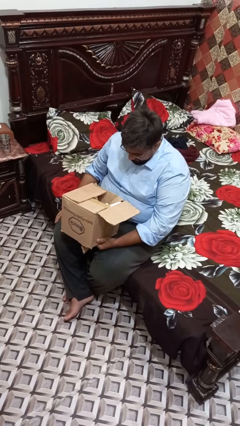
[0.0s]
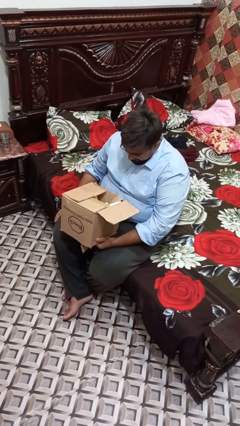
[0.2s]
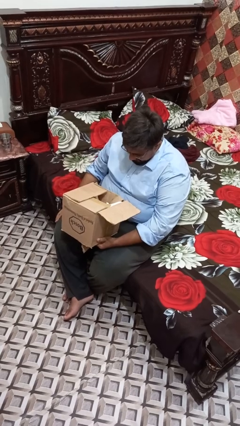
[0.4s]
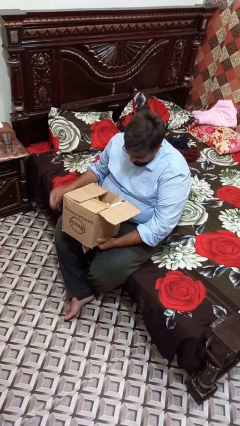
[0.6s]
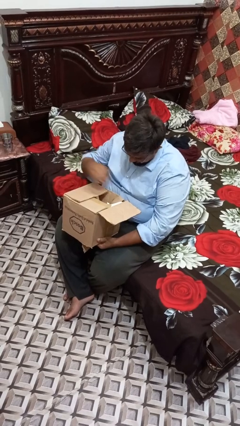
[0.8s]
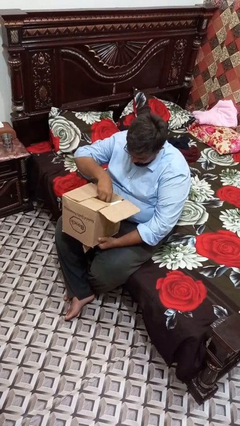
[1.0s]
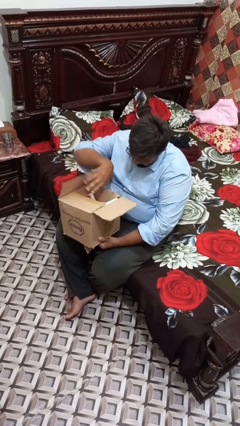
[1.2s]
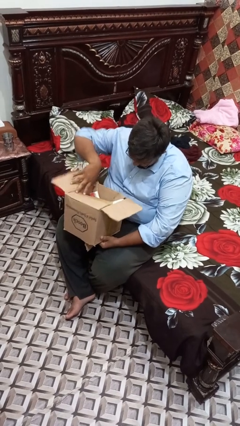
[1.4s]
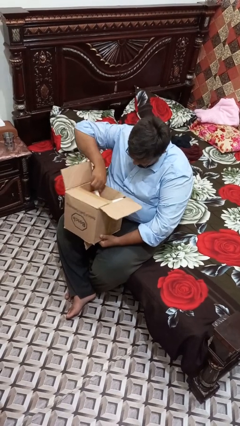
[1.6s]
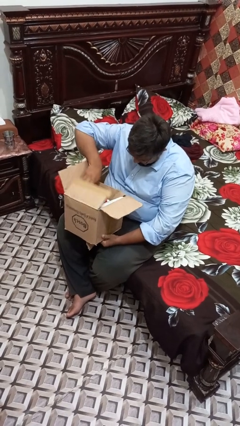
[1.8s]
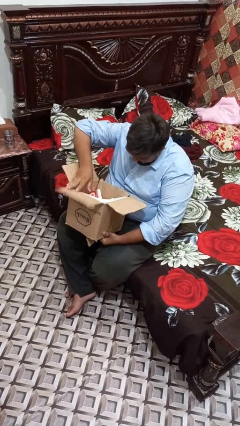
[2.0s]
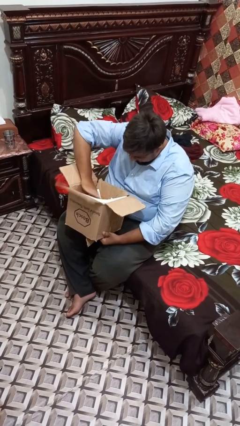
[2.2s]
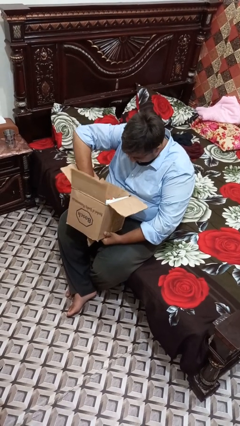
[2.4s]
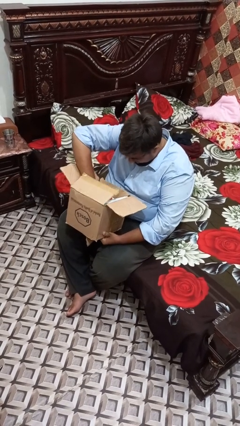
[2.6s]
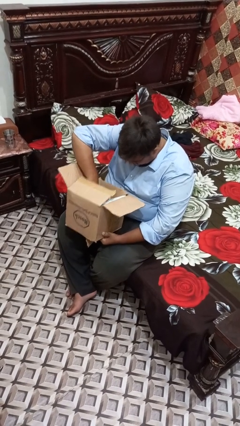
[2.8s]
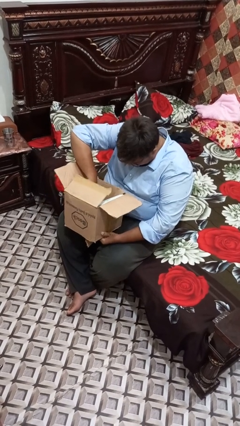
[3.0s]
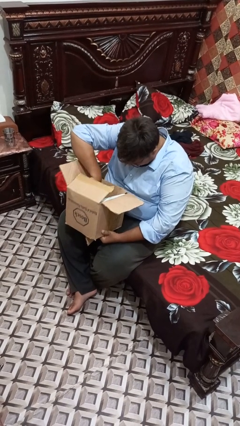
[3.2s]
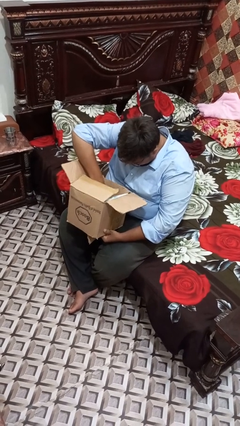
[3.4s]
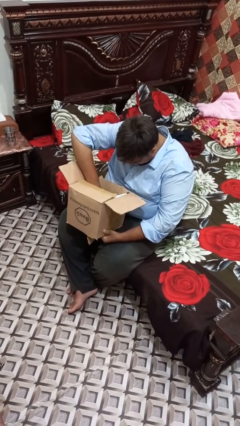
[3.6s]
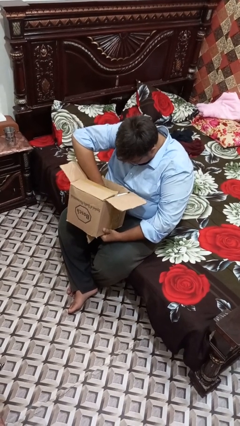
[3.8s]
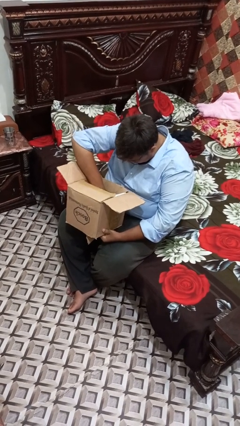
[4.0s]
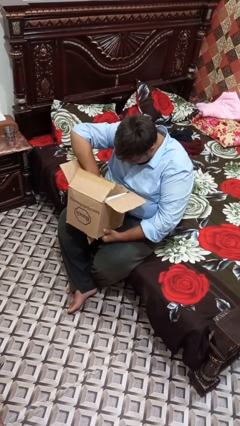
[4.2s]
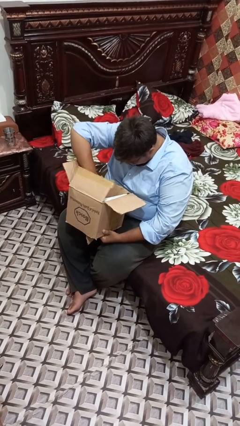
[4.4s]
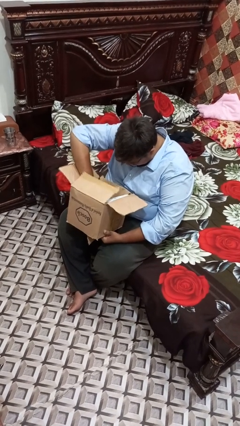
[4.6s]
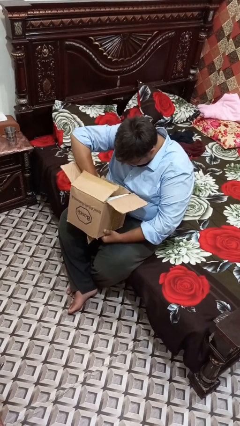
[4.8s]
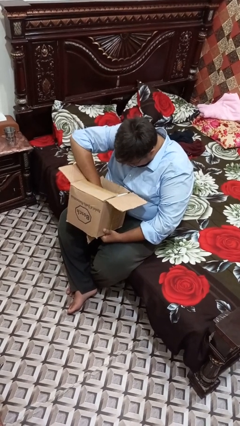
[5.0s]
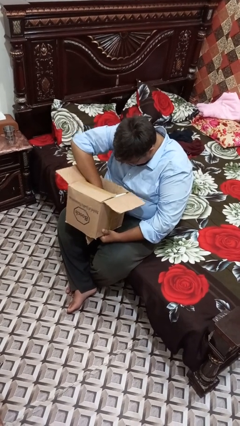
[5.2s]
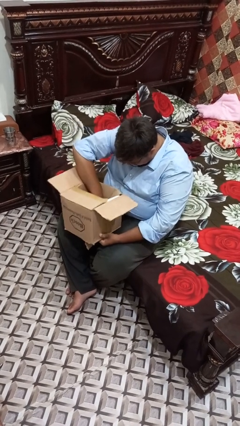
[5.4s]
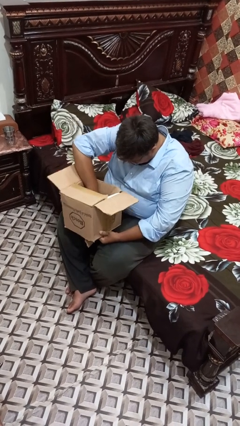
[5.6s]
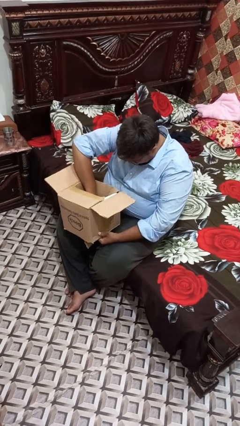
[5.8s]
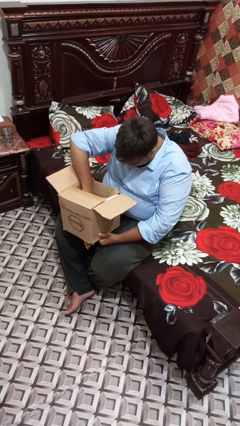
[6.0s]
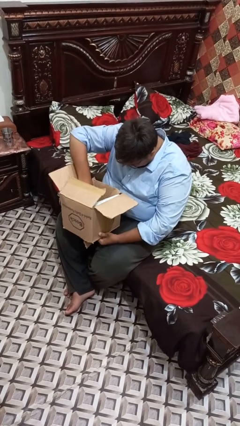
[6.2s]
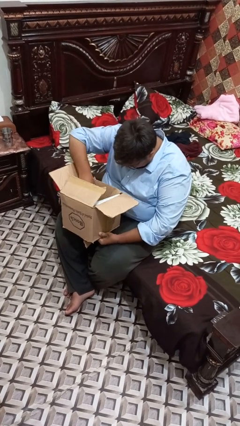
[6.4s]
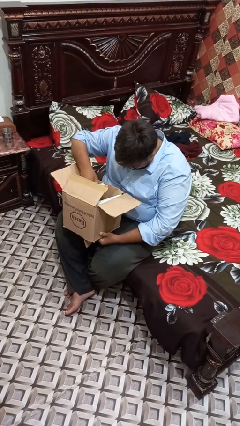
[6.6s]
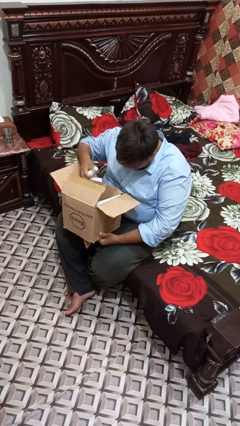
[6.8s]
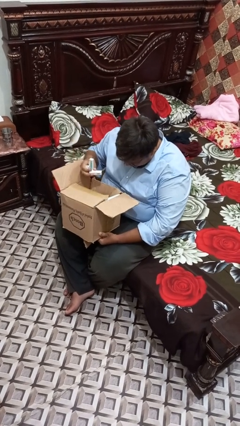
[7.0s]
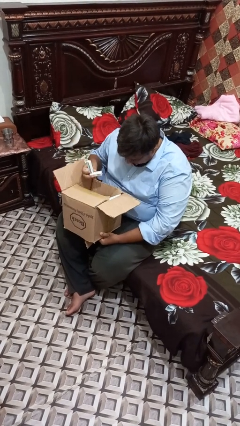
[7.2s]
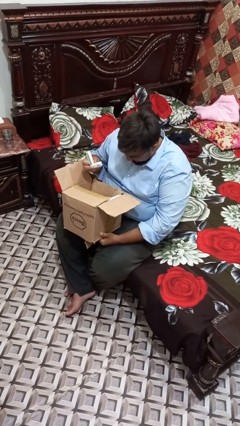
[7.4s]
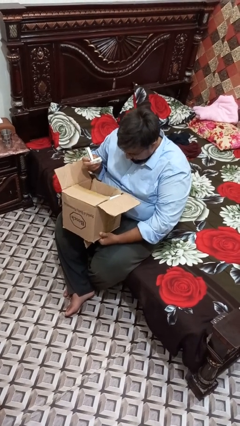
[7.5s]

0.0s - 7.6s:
person searches in box

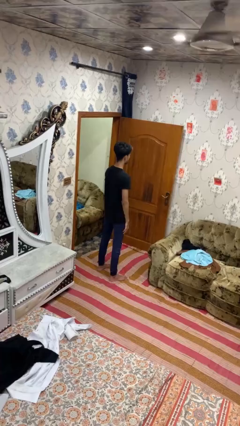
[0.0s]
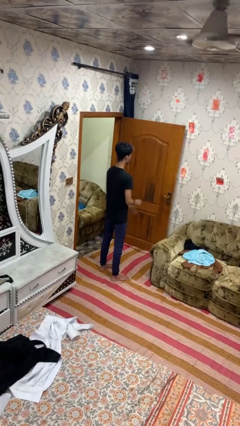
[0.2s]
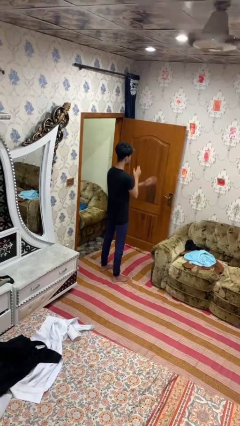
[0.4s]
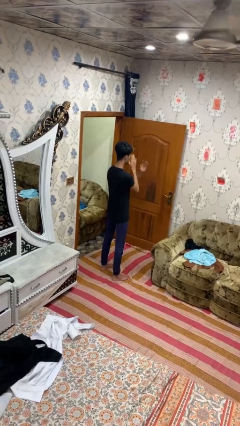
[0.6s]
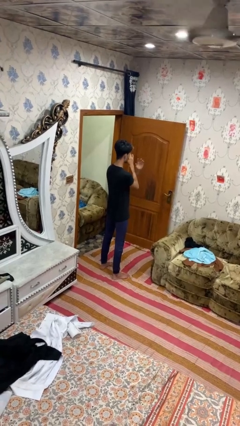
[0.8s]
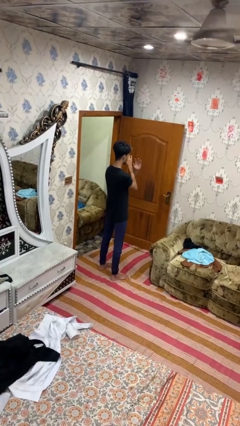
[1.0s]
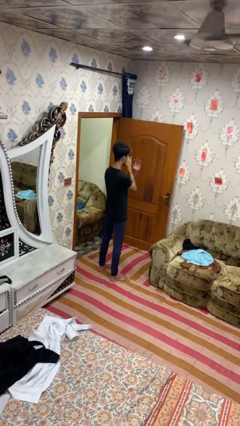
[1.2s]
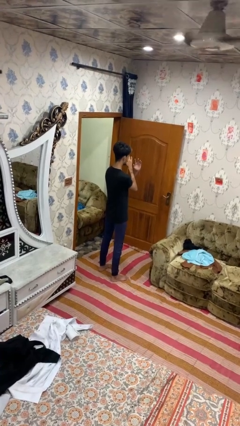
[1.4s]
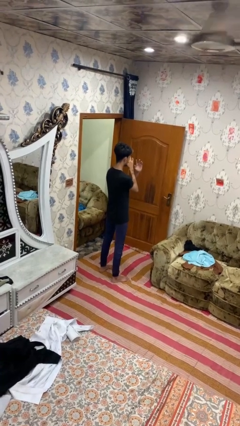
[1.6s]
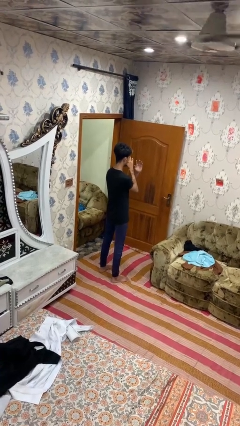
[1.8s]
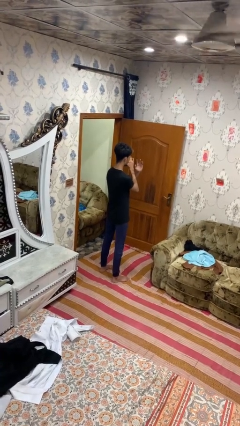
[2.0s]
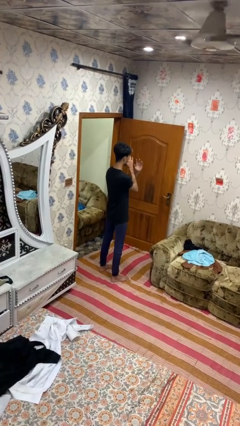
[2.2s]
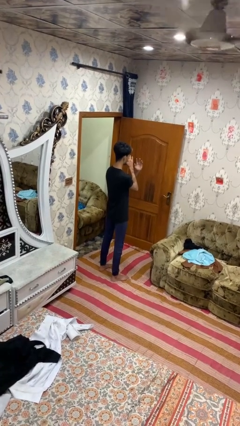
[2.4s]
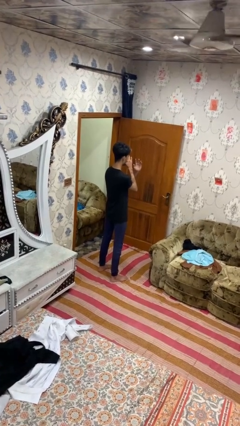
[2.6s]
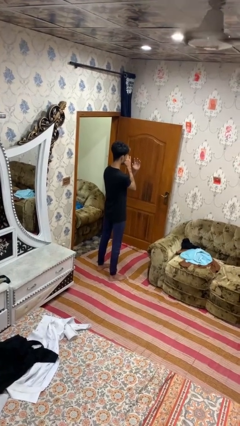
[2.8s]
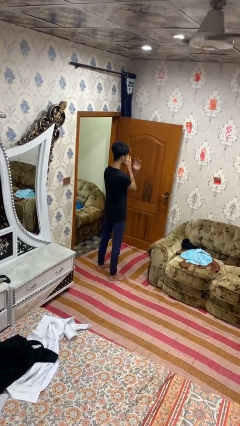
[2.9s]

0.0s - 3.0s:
person gestures arms x

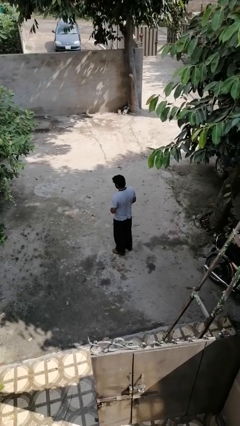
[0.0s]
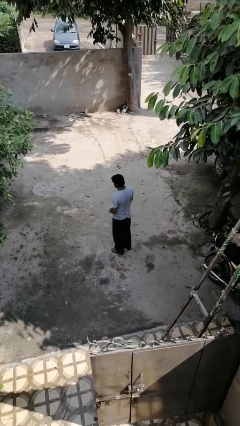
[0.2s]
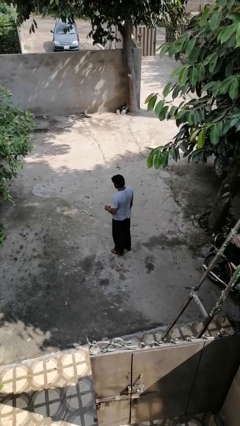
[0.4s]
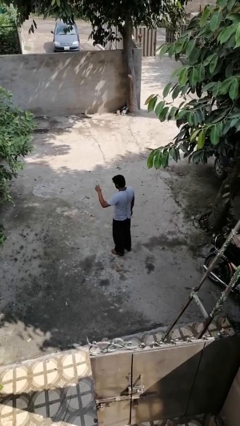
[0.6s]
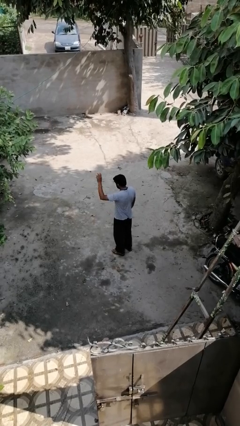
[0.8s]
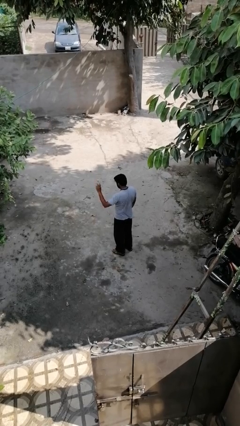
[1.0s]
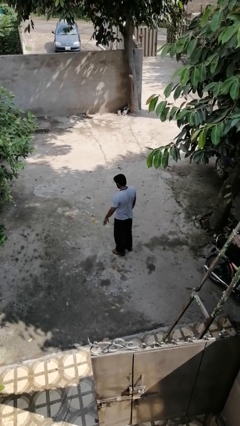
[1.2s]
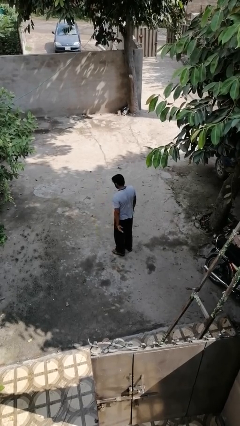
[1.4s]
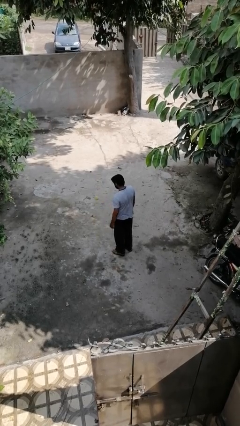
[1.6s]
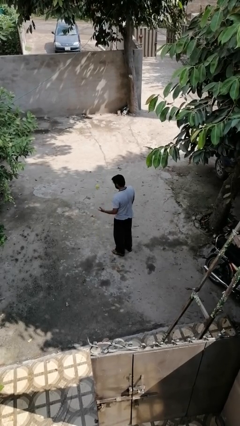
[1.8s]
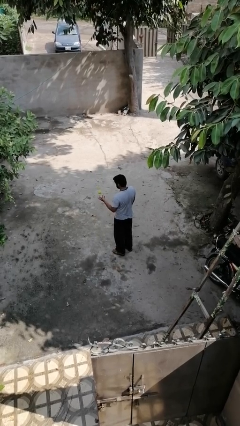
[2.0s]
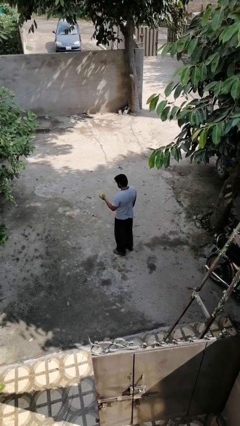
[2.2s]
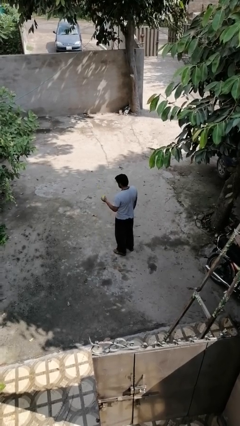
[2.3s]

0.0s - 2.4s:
person bounces ball on floor

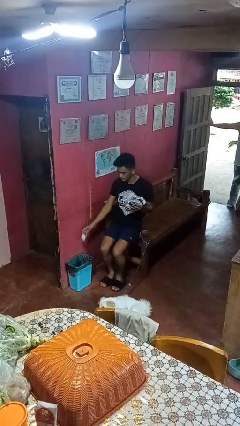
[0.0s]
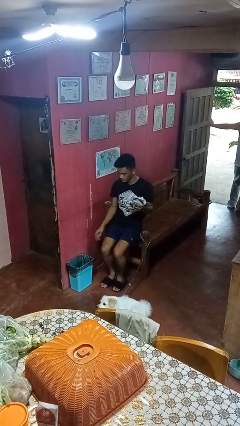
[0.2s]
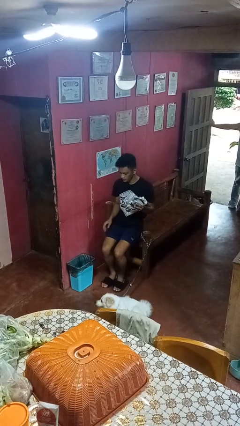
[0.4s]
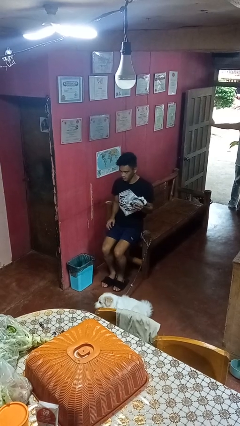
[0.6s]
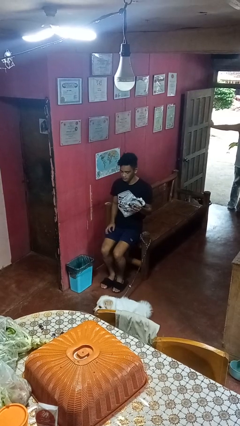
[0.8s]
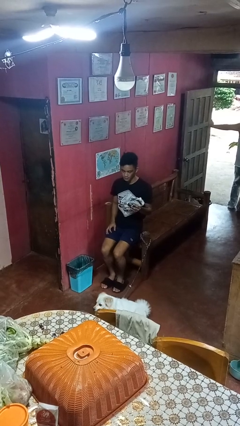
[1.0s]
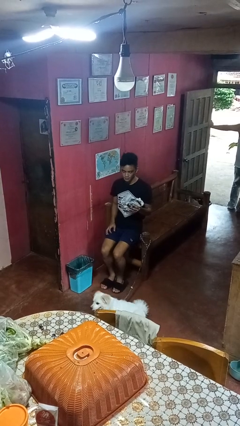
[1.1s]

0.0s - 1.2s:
person discards trash

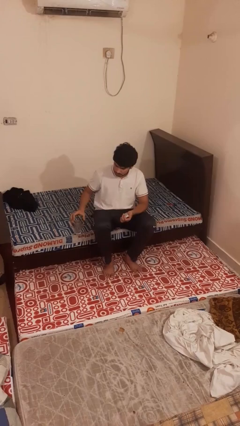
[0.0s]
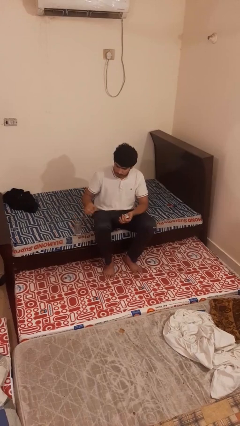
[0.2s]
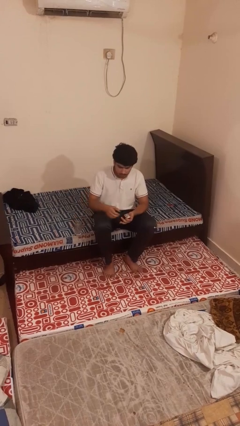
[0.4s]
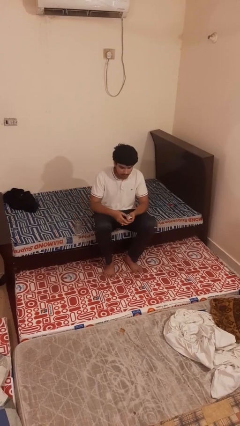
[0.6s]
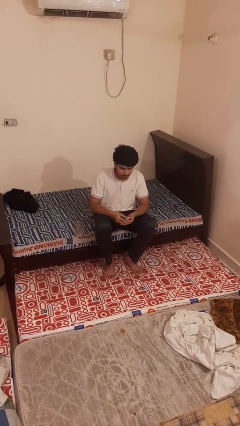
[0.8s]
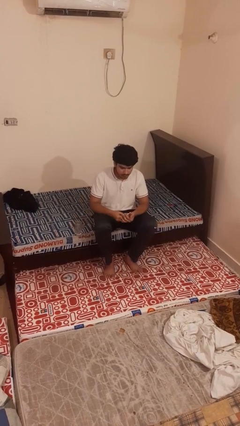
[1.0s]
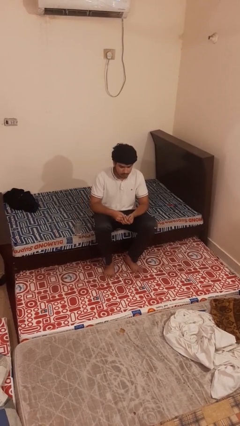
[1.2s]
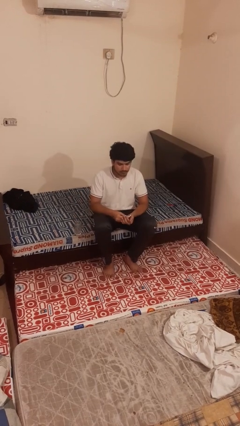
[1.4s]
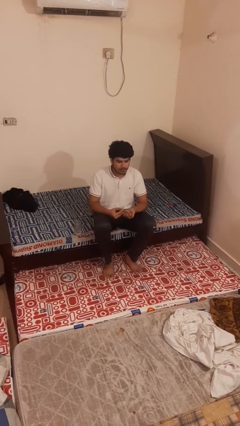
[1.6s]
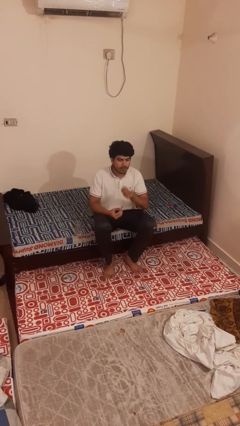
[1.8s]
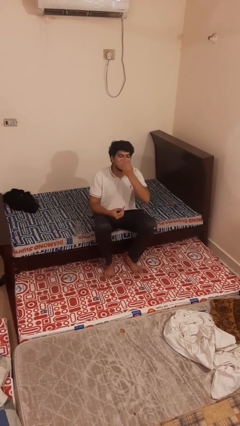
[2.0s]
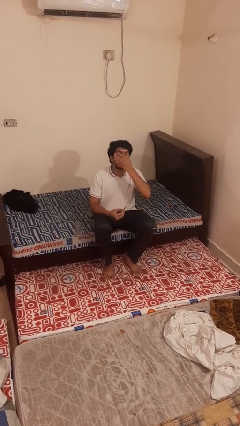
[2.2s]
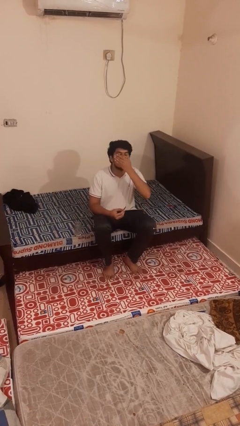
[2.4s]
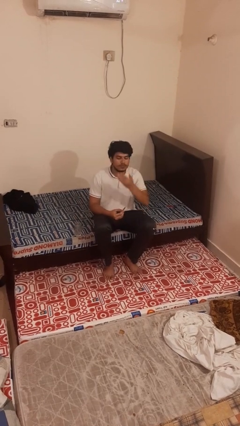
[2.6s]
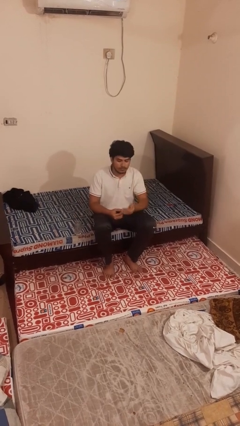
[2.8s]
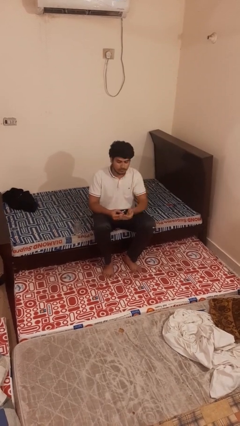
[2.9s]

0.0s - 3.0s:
person takes medicine pills

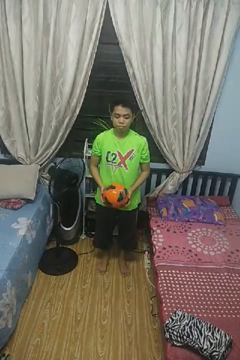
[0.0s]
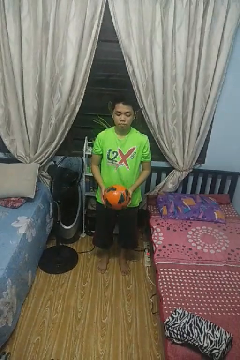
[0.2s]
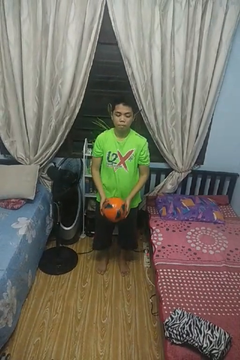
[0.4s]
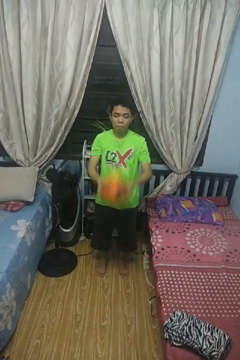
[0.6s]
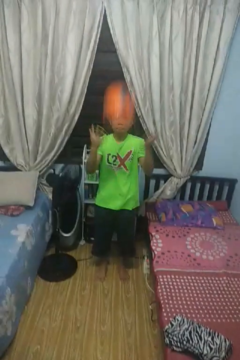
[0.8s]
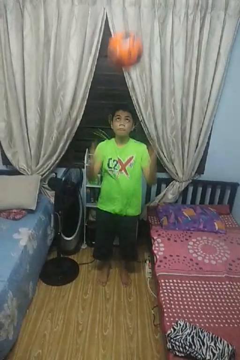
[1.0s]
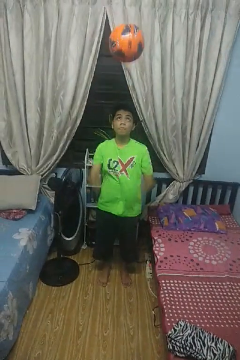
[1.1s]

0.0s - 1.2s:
person drops object
